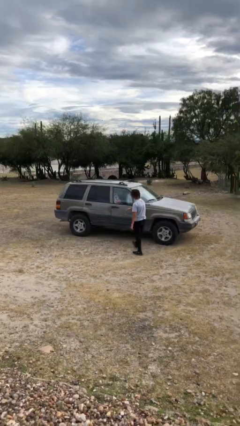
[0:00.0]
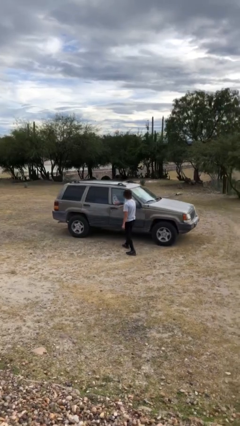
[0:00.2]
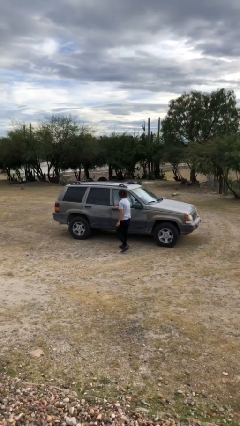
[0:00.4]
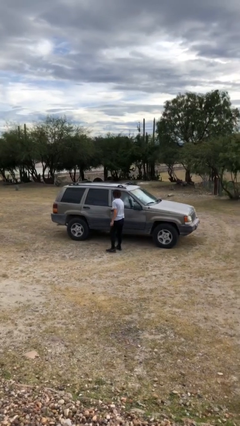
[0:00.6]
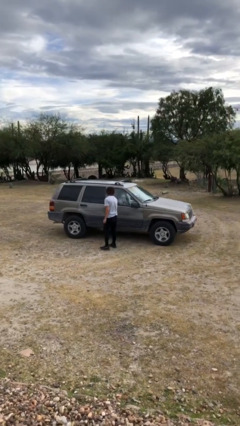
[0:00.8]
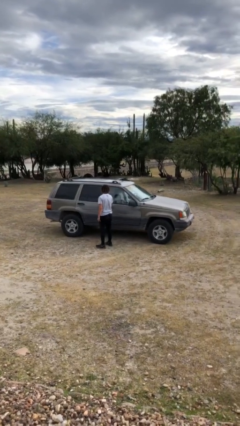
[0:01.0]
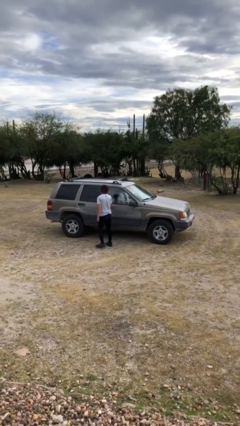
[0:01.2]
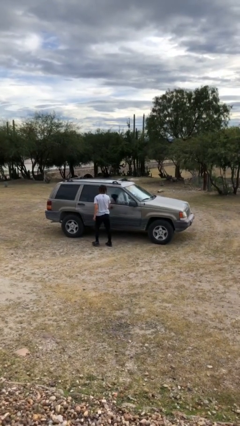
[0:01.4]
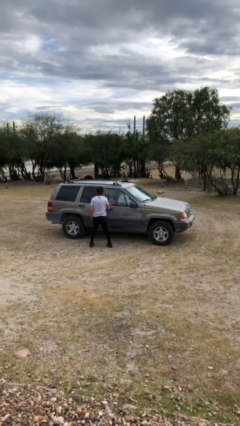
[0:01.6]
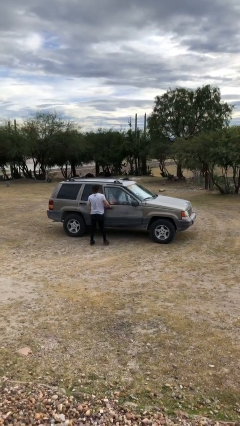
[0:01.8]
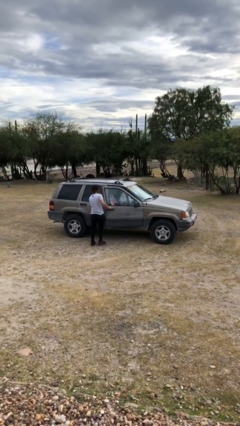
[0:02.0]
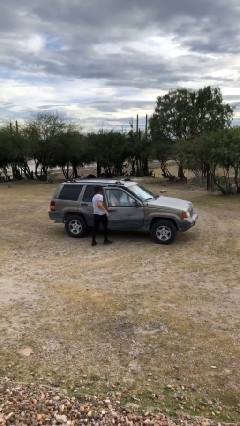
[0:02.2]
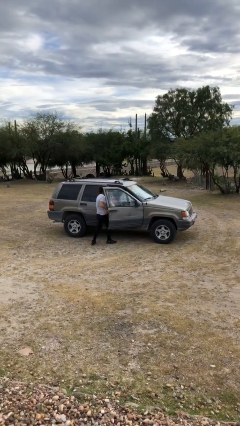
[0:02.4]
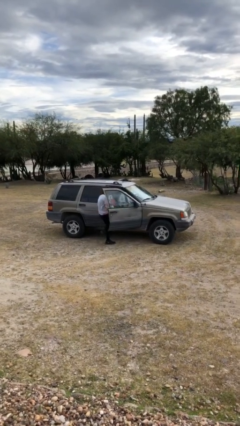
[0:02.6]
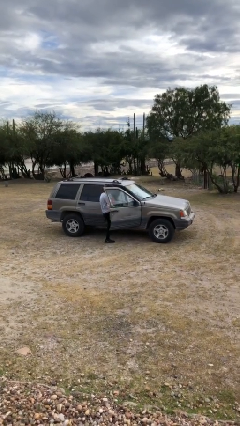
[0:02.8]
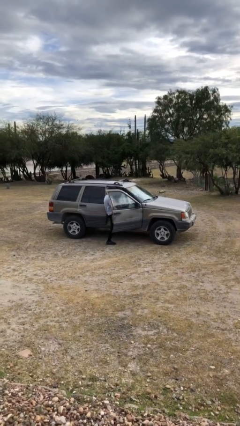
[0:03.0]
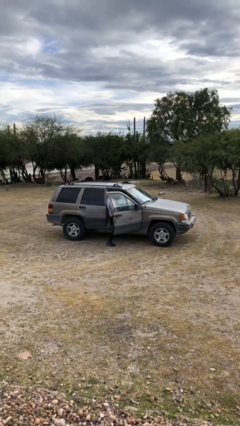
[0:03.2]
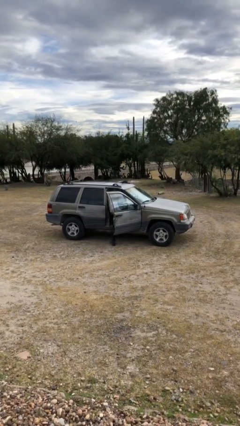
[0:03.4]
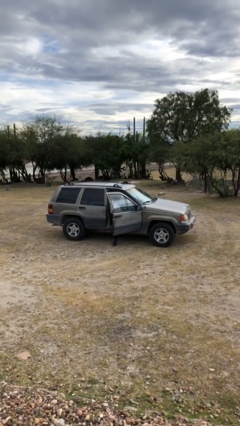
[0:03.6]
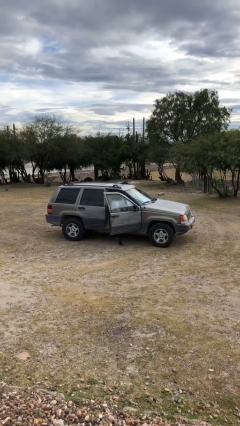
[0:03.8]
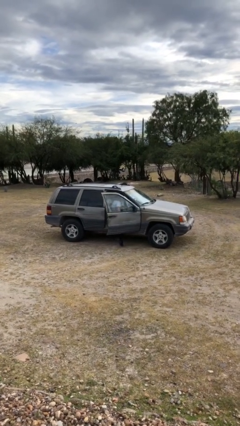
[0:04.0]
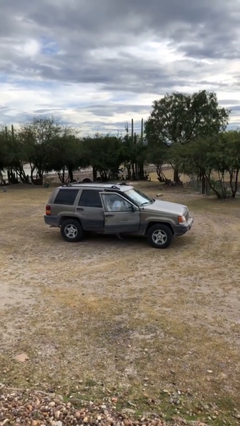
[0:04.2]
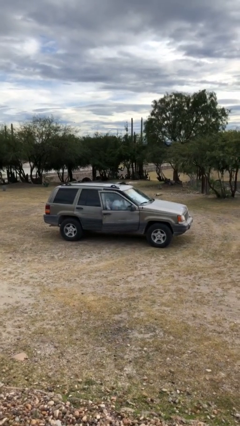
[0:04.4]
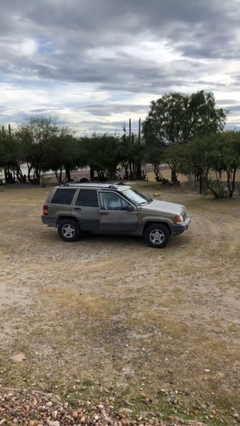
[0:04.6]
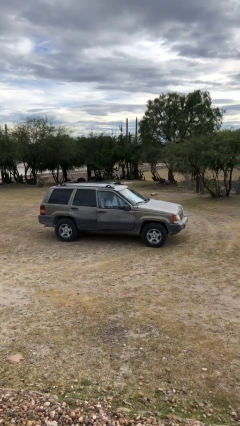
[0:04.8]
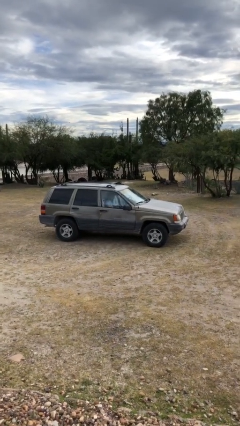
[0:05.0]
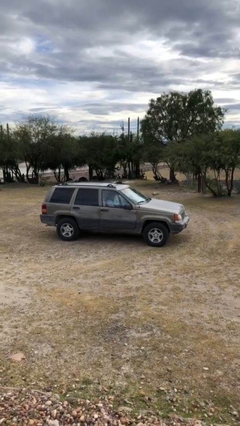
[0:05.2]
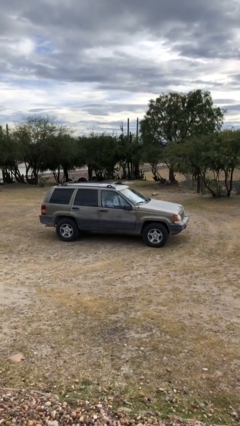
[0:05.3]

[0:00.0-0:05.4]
car picks up person

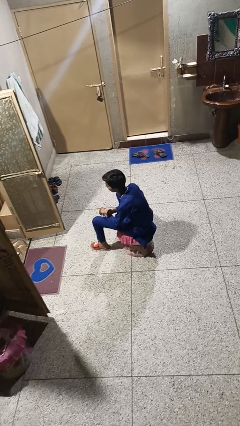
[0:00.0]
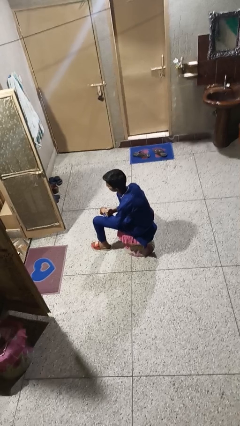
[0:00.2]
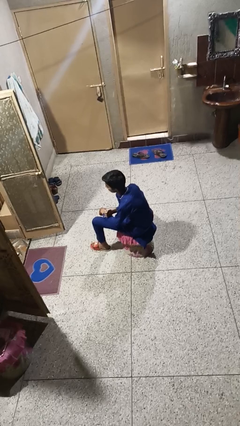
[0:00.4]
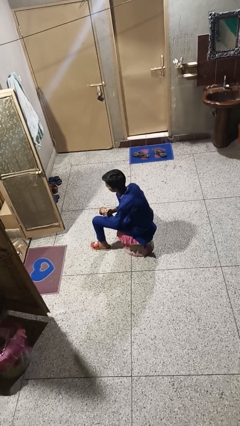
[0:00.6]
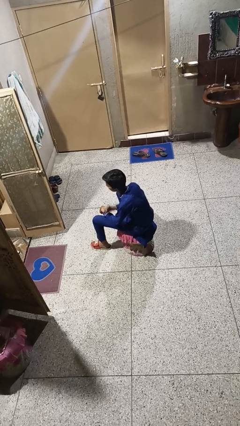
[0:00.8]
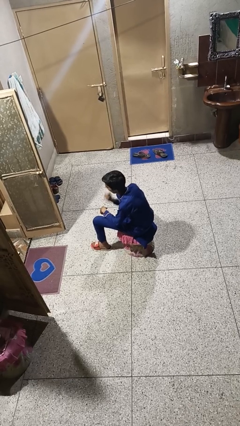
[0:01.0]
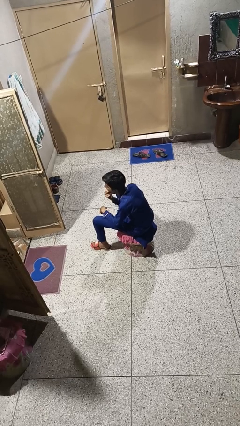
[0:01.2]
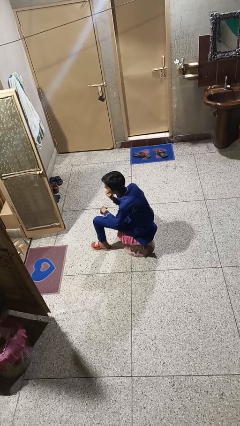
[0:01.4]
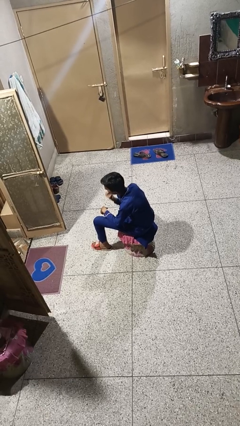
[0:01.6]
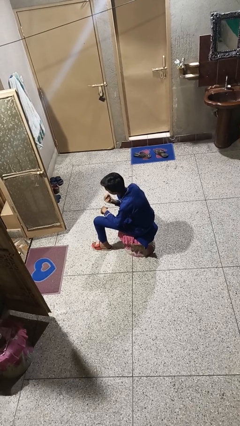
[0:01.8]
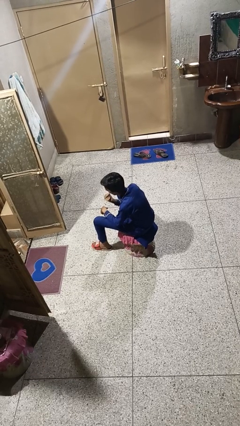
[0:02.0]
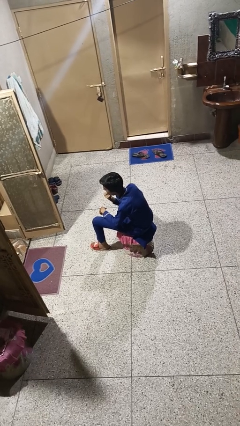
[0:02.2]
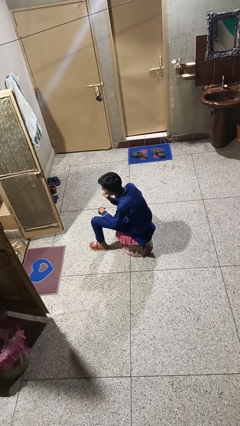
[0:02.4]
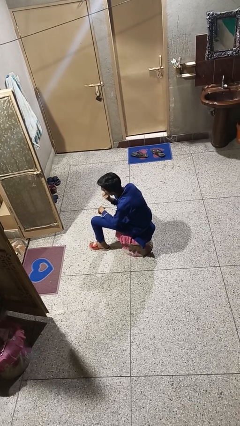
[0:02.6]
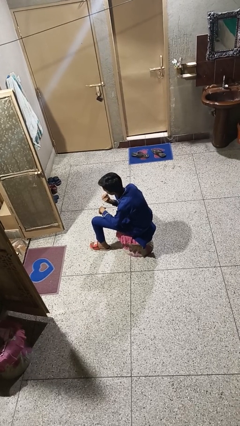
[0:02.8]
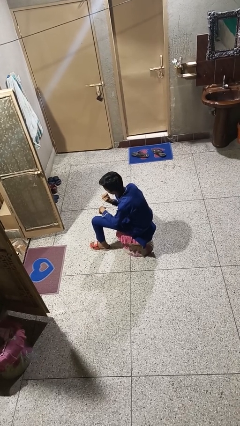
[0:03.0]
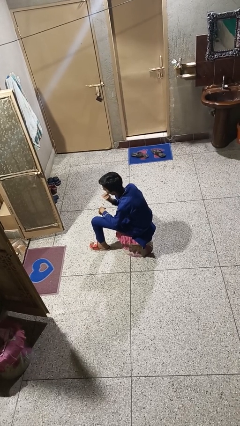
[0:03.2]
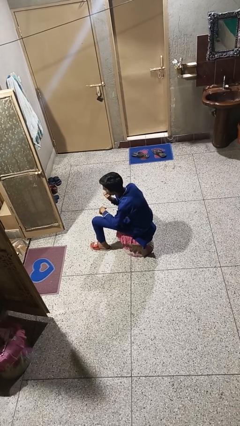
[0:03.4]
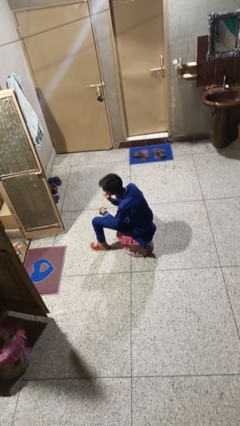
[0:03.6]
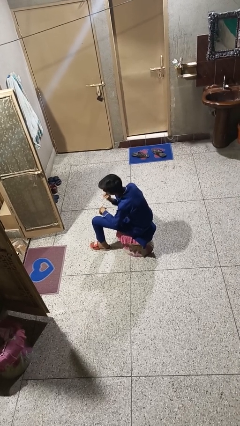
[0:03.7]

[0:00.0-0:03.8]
person licks fingers

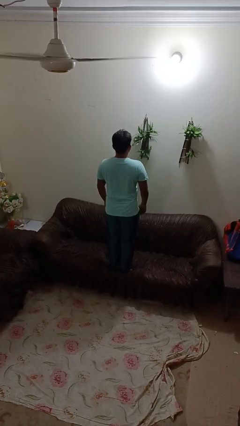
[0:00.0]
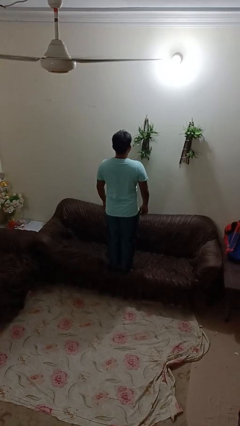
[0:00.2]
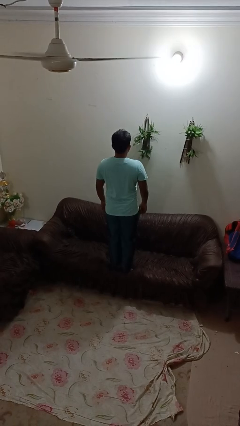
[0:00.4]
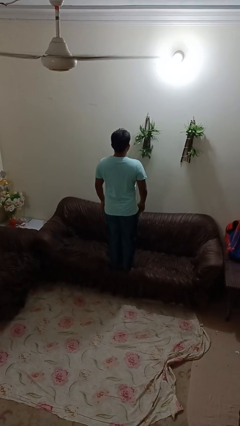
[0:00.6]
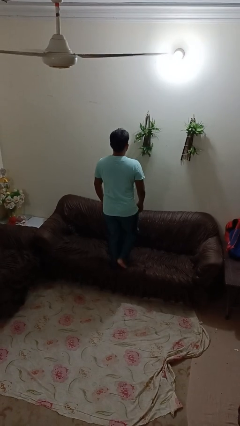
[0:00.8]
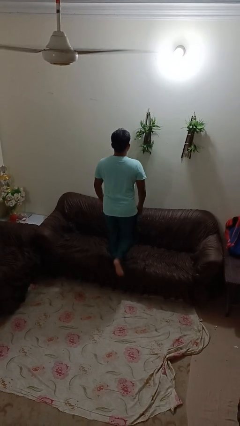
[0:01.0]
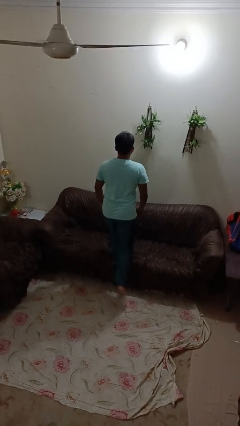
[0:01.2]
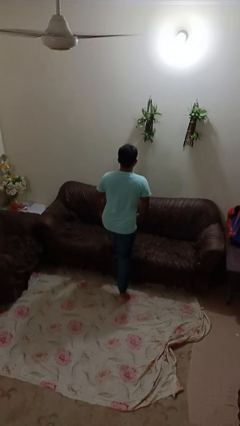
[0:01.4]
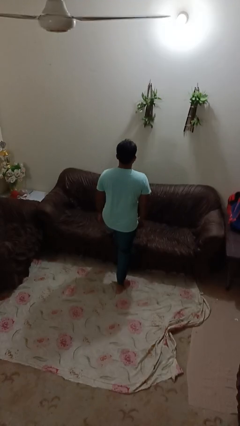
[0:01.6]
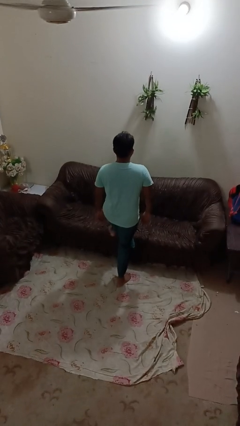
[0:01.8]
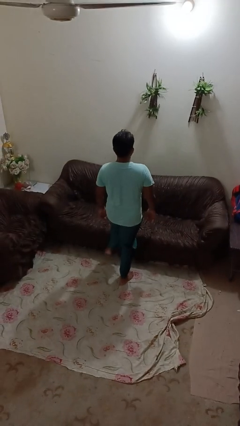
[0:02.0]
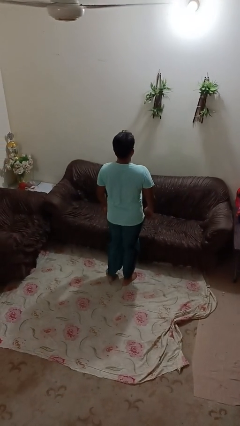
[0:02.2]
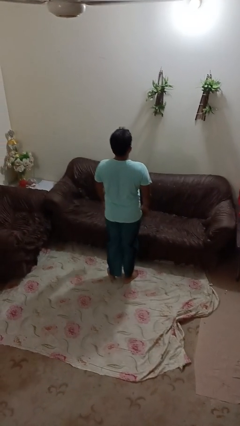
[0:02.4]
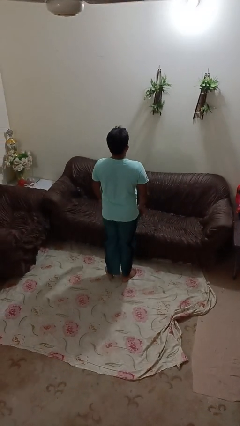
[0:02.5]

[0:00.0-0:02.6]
person climbs off couch

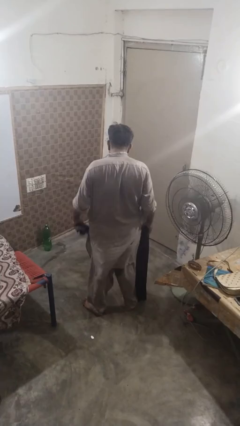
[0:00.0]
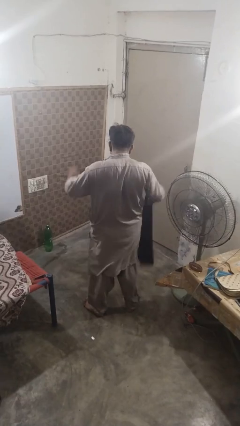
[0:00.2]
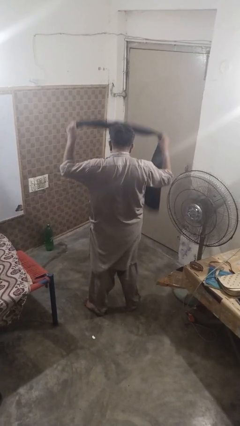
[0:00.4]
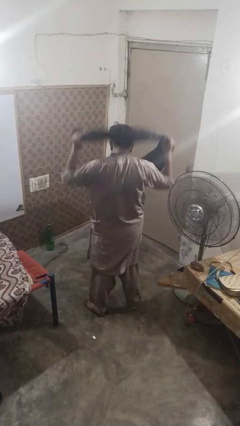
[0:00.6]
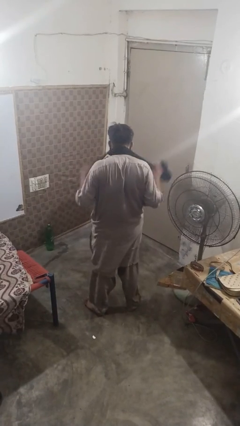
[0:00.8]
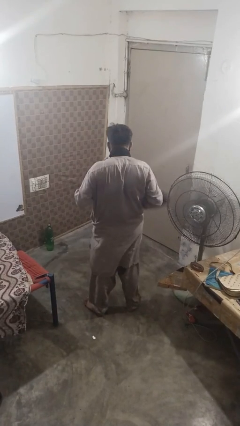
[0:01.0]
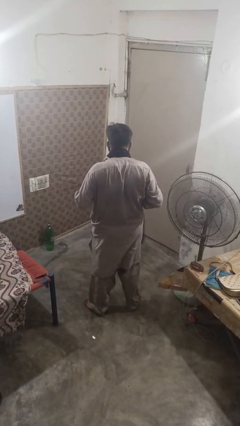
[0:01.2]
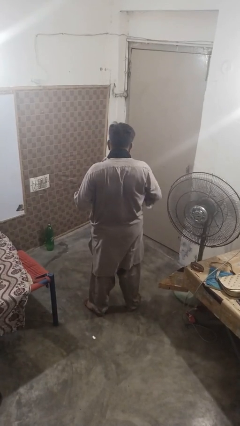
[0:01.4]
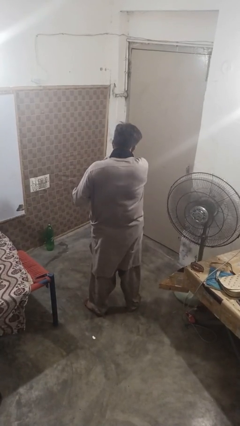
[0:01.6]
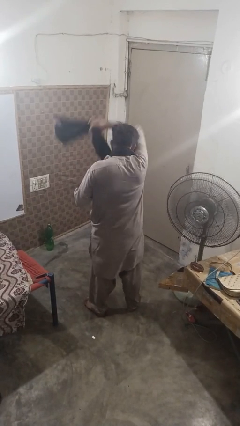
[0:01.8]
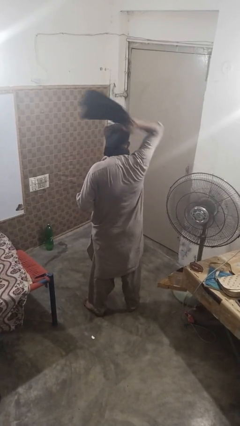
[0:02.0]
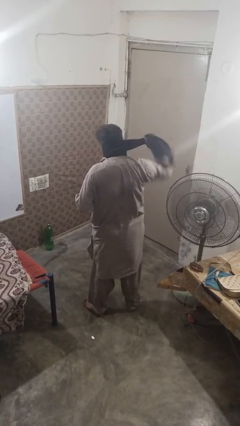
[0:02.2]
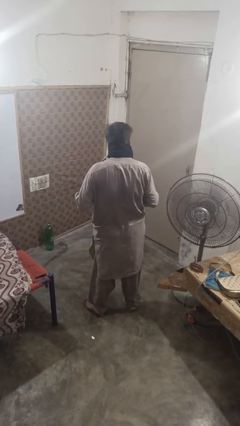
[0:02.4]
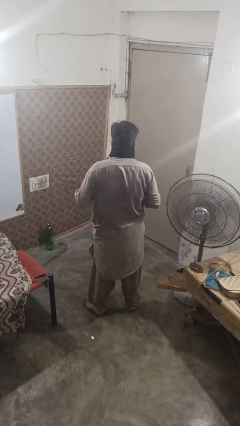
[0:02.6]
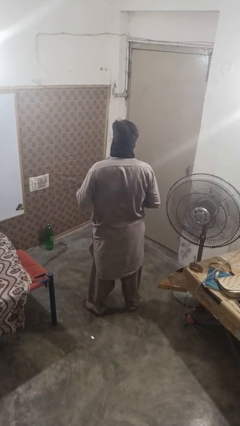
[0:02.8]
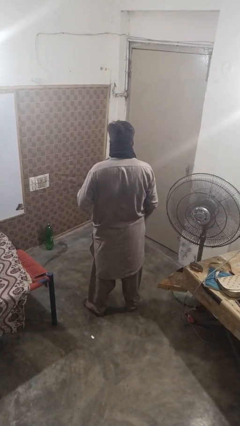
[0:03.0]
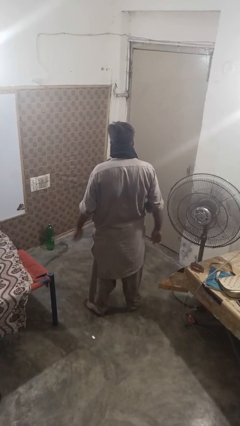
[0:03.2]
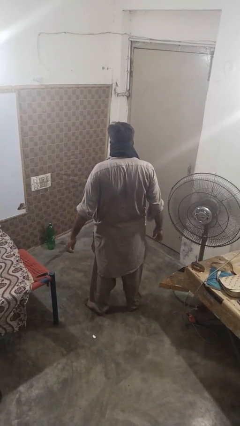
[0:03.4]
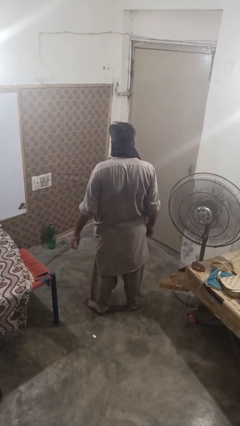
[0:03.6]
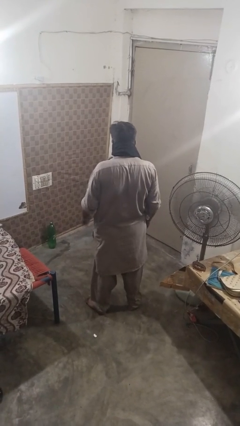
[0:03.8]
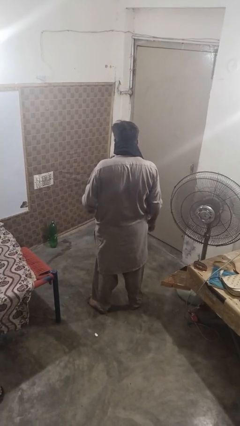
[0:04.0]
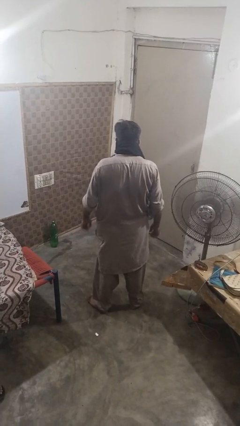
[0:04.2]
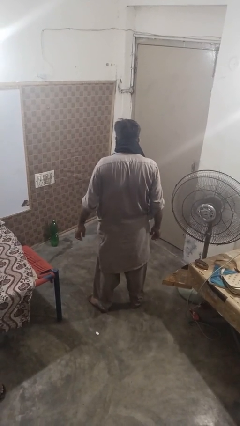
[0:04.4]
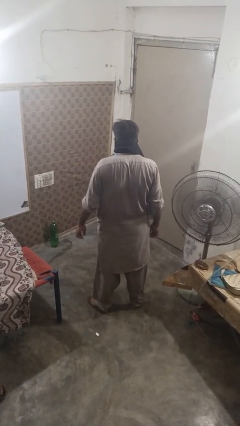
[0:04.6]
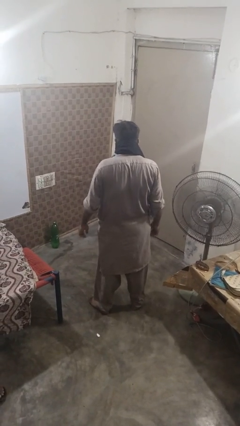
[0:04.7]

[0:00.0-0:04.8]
person puts on scarf

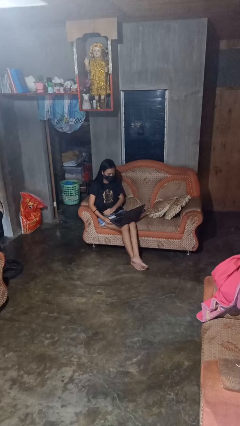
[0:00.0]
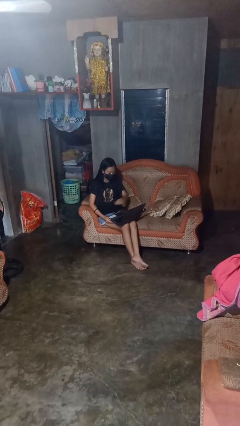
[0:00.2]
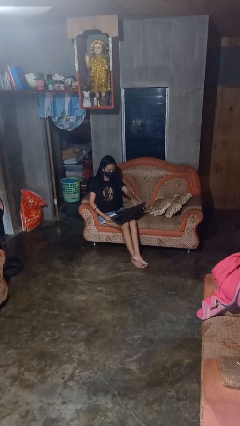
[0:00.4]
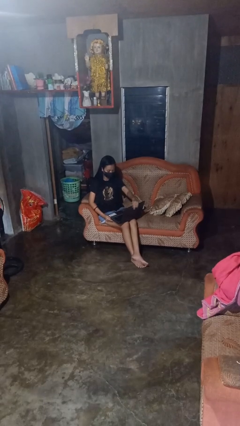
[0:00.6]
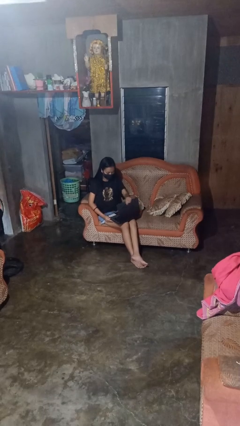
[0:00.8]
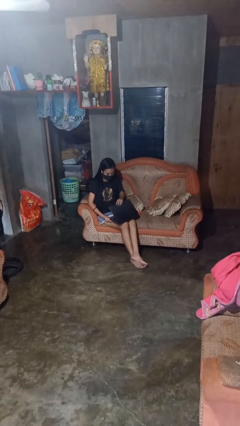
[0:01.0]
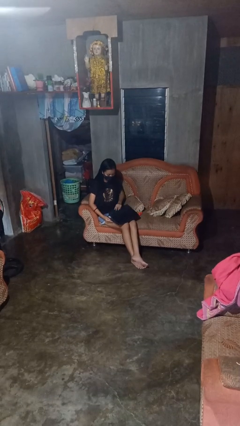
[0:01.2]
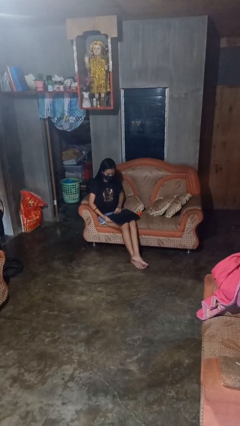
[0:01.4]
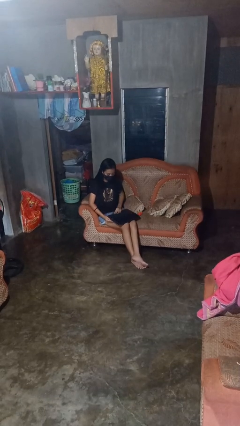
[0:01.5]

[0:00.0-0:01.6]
person closes laptop
